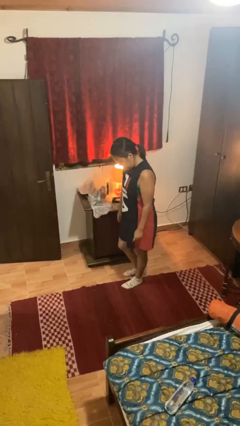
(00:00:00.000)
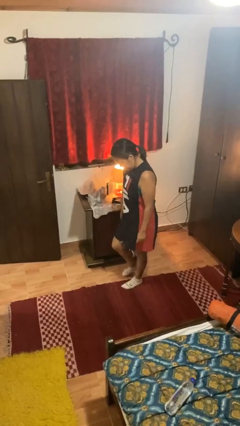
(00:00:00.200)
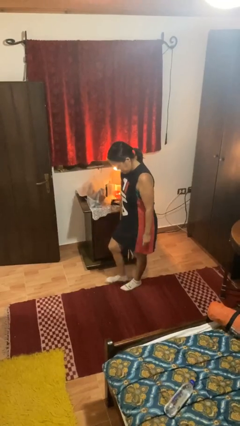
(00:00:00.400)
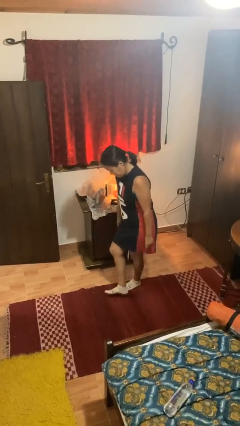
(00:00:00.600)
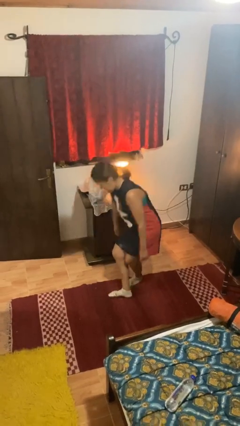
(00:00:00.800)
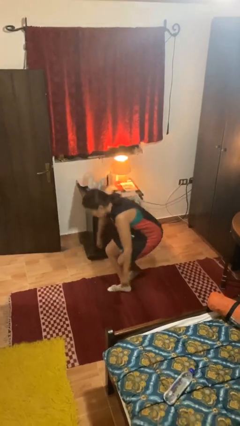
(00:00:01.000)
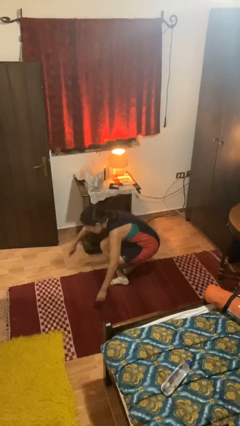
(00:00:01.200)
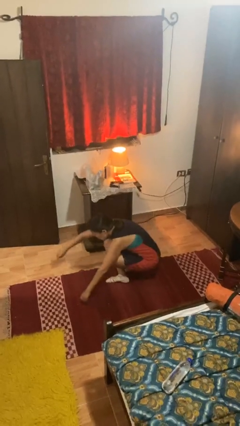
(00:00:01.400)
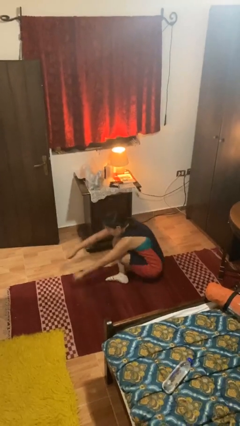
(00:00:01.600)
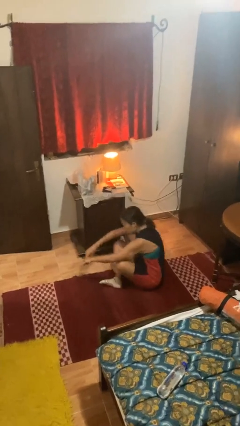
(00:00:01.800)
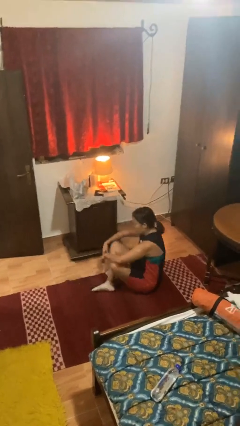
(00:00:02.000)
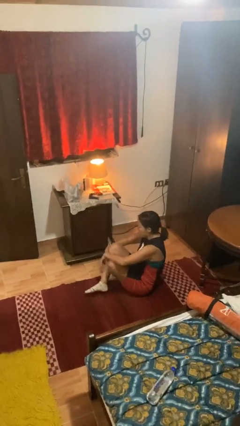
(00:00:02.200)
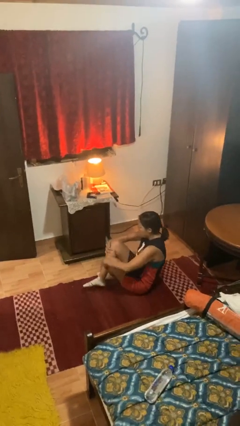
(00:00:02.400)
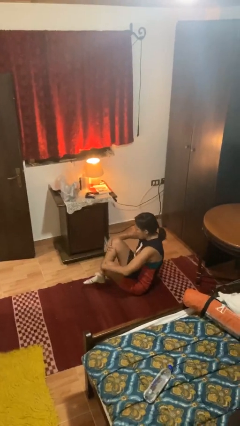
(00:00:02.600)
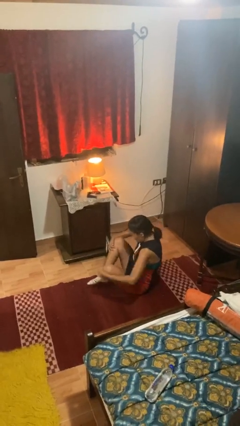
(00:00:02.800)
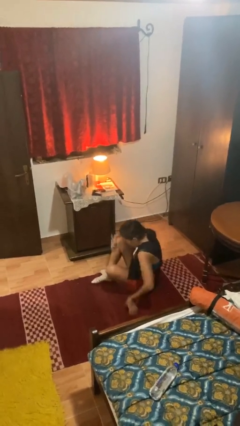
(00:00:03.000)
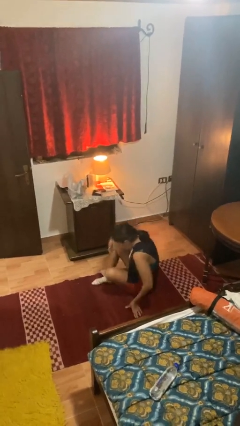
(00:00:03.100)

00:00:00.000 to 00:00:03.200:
person sits crisscross

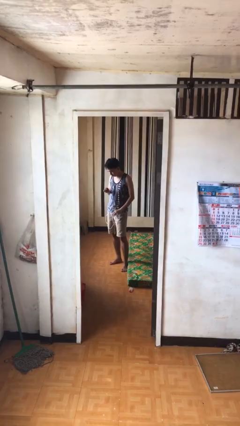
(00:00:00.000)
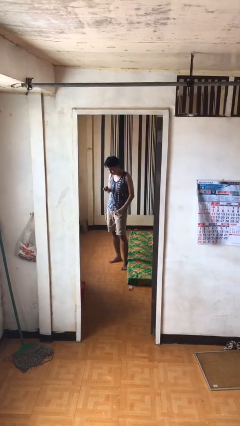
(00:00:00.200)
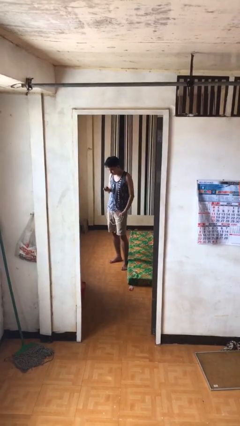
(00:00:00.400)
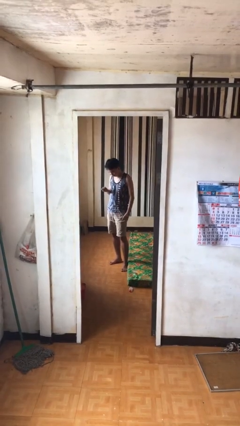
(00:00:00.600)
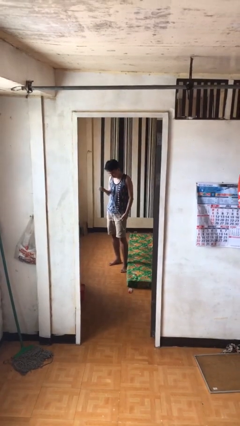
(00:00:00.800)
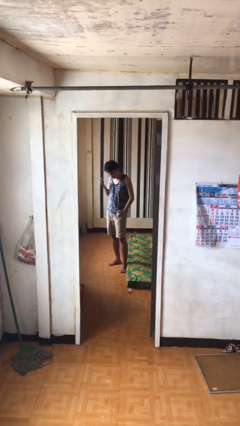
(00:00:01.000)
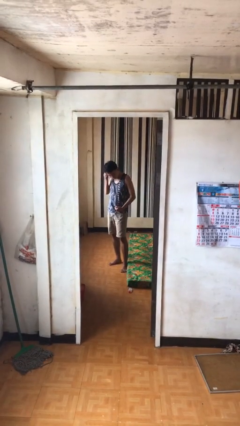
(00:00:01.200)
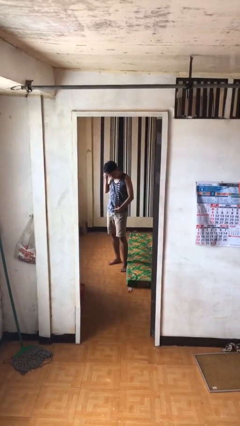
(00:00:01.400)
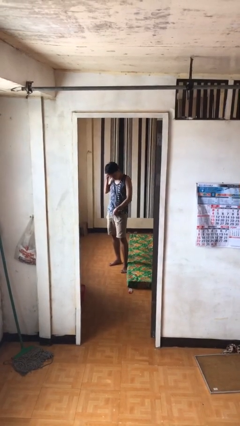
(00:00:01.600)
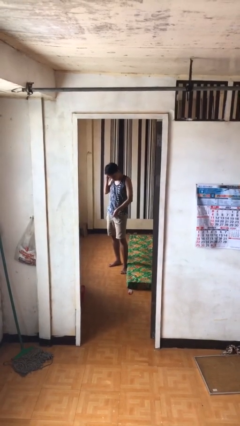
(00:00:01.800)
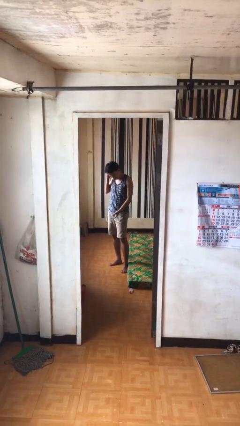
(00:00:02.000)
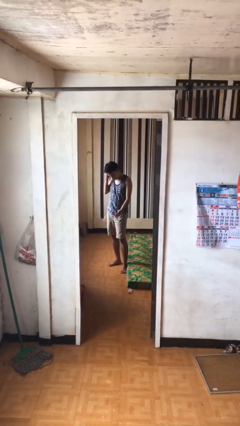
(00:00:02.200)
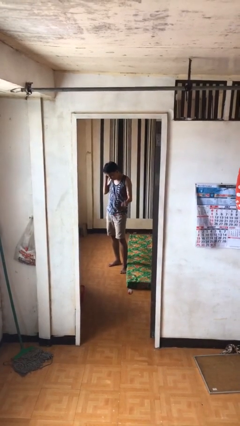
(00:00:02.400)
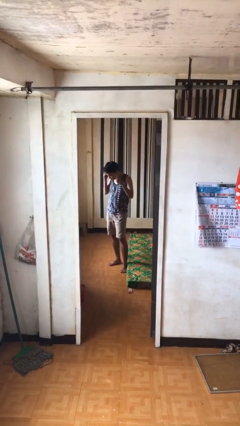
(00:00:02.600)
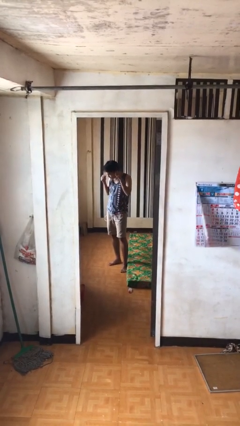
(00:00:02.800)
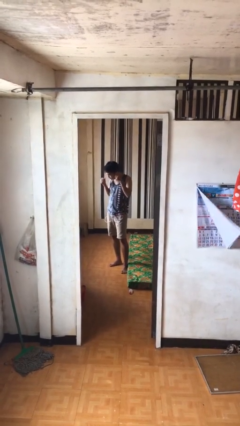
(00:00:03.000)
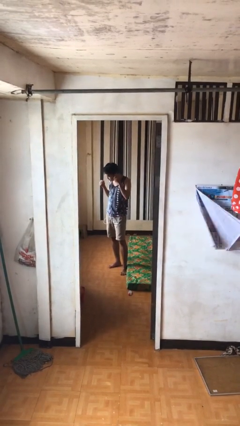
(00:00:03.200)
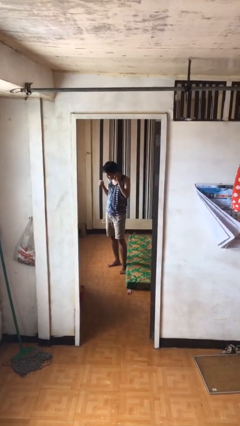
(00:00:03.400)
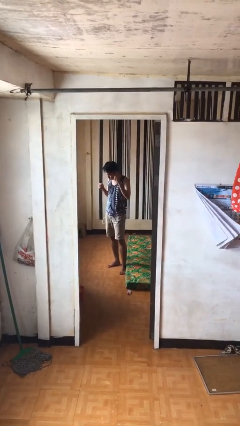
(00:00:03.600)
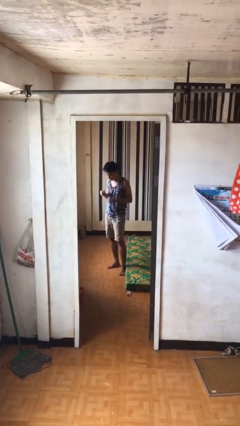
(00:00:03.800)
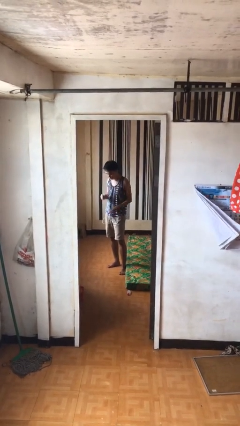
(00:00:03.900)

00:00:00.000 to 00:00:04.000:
person puts on headphones

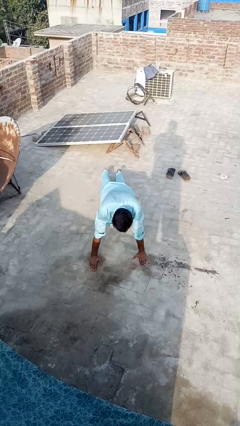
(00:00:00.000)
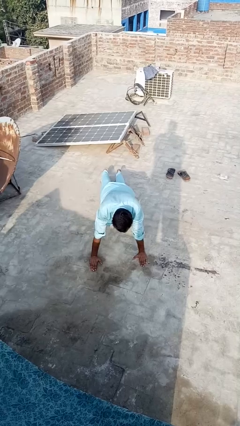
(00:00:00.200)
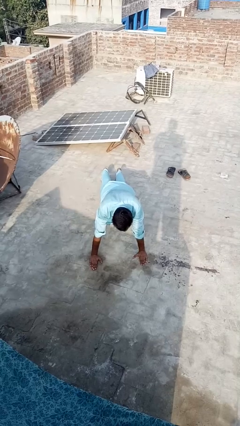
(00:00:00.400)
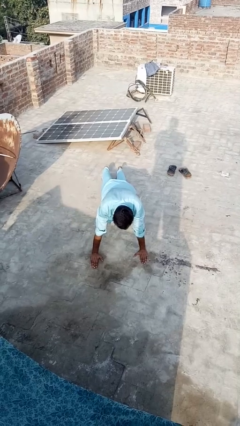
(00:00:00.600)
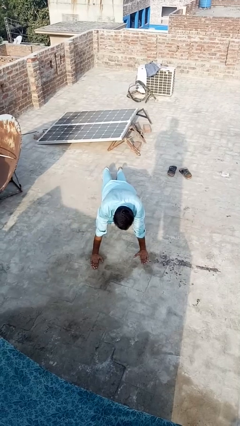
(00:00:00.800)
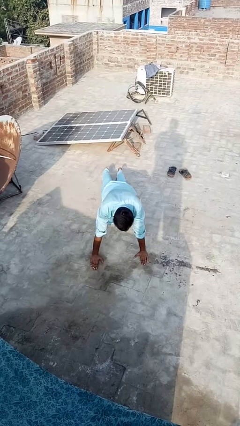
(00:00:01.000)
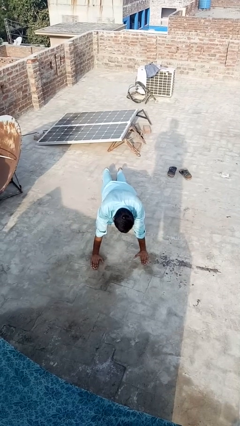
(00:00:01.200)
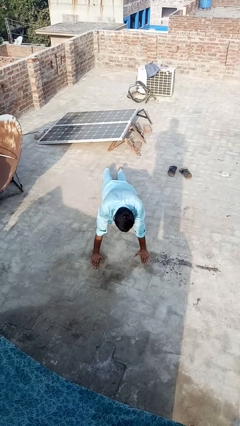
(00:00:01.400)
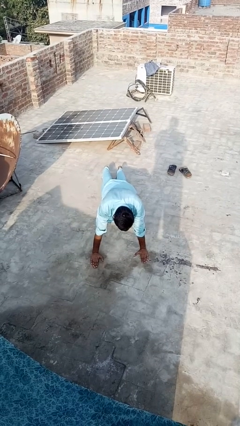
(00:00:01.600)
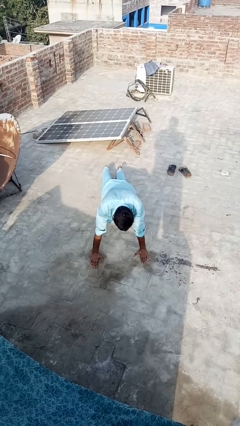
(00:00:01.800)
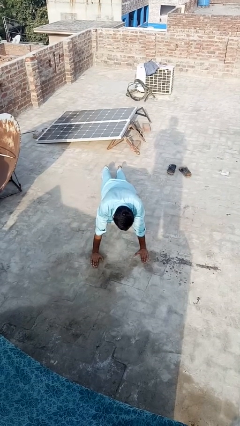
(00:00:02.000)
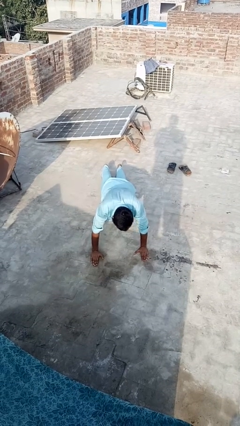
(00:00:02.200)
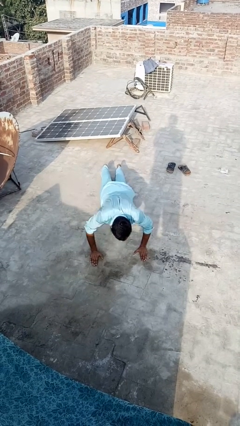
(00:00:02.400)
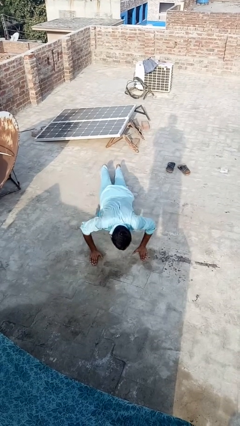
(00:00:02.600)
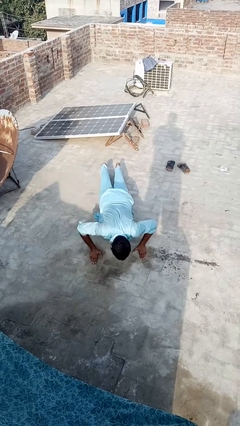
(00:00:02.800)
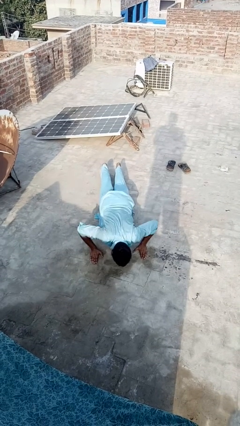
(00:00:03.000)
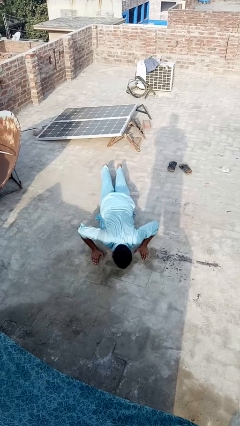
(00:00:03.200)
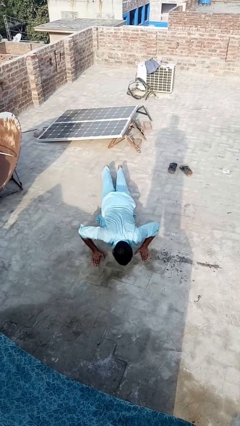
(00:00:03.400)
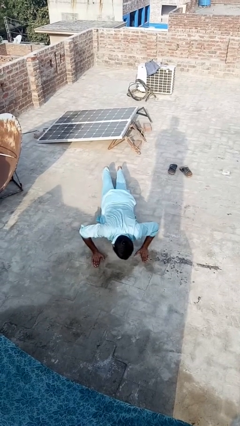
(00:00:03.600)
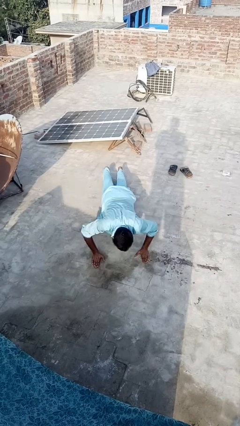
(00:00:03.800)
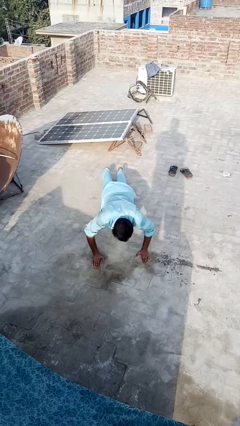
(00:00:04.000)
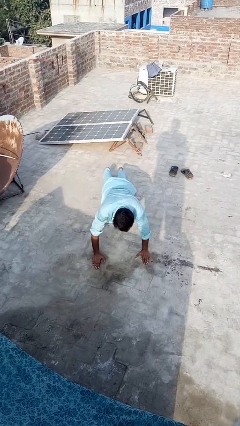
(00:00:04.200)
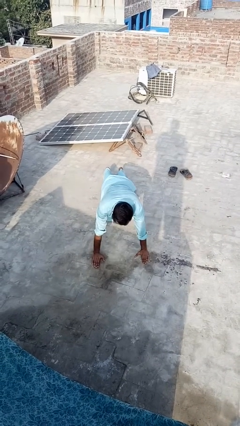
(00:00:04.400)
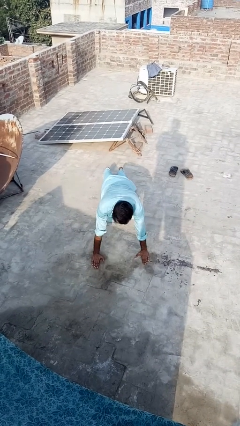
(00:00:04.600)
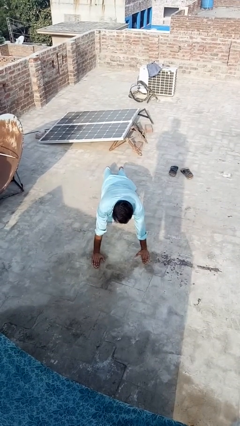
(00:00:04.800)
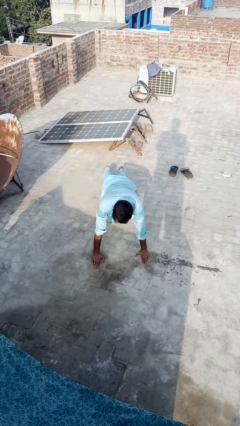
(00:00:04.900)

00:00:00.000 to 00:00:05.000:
person exercises with pushup

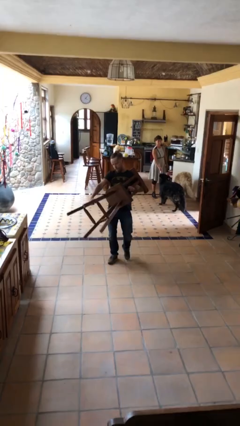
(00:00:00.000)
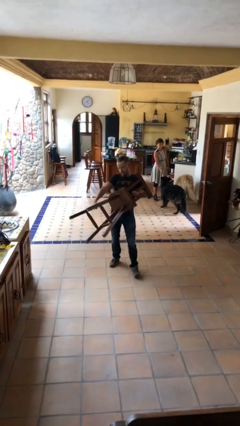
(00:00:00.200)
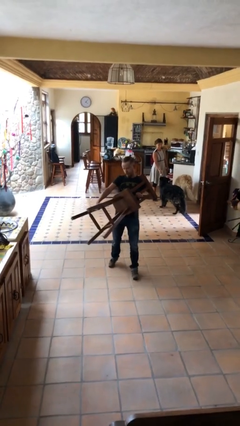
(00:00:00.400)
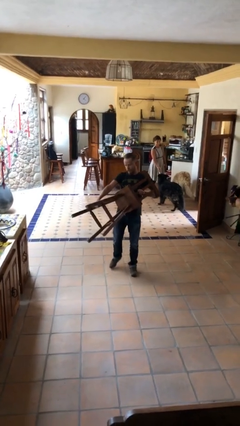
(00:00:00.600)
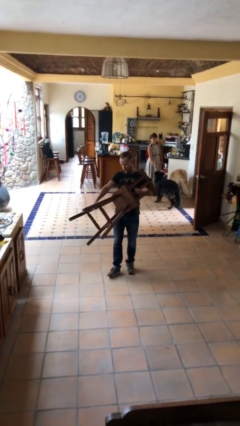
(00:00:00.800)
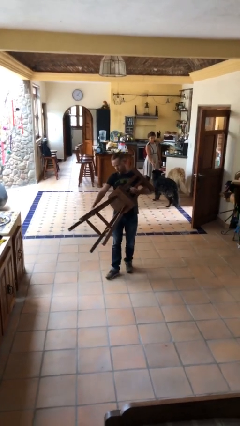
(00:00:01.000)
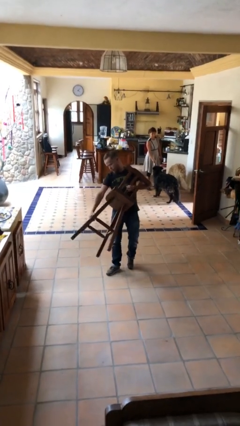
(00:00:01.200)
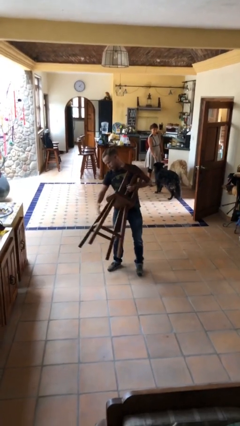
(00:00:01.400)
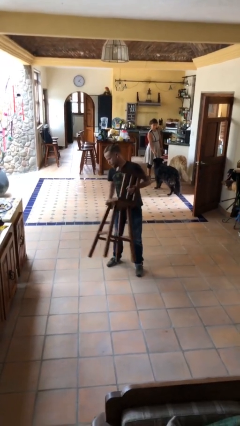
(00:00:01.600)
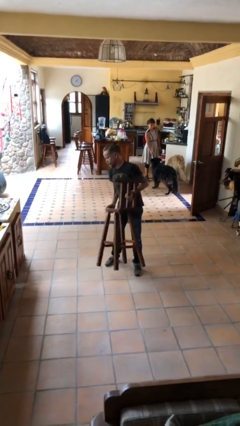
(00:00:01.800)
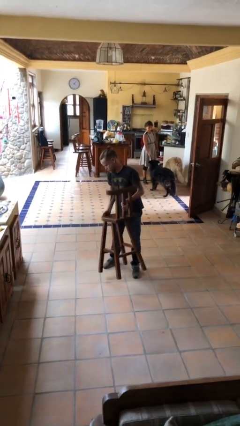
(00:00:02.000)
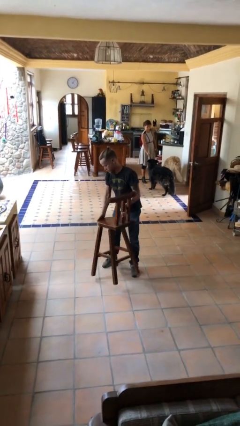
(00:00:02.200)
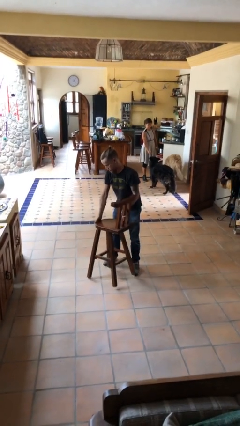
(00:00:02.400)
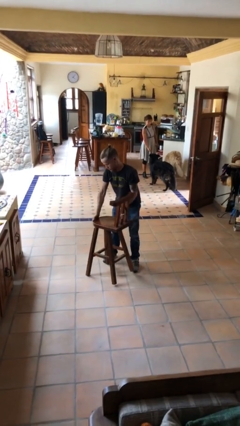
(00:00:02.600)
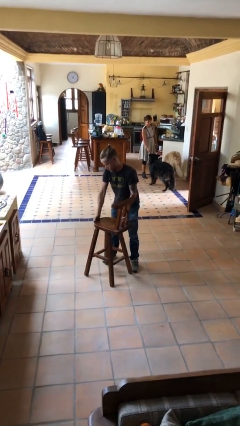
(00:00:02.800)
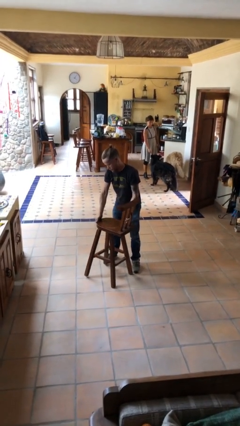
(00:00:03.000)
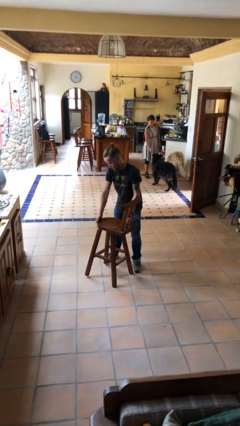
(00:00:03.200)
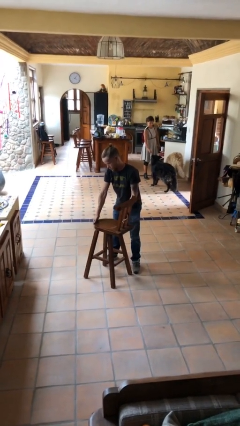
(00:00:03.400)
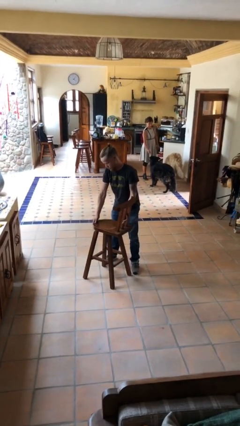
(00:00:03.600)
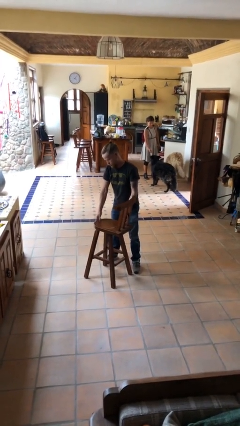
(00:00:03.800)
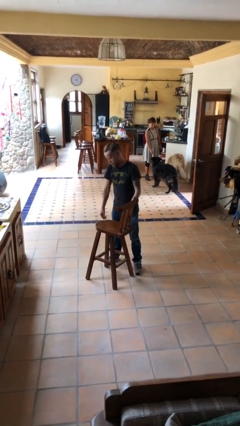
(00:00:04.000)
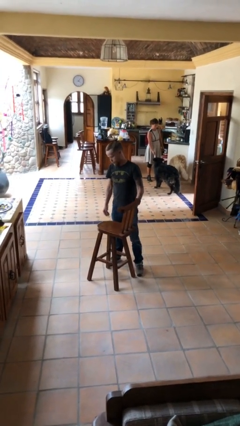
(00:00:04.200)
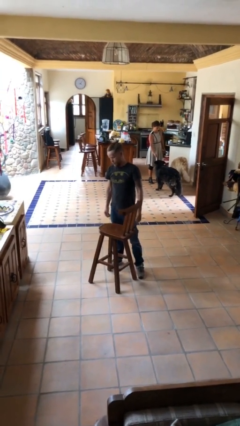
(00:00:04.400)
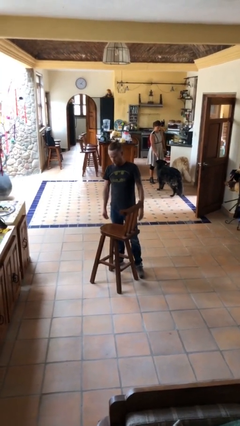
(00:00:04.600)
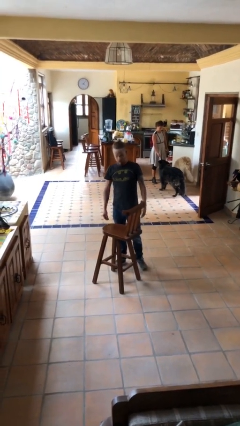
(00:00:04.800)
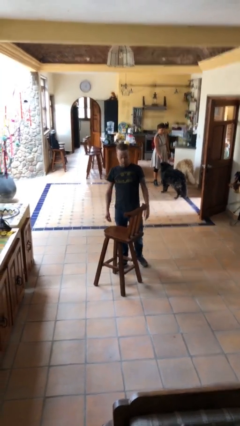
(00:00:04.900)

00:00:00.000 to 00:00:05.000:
person puts down object on floor

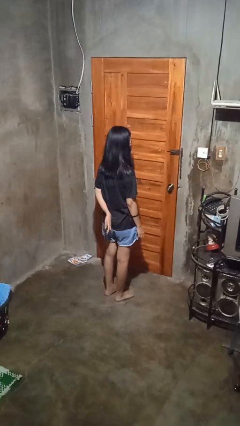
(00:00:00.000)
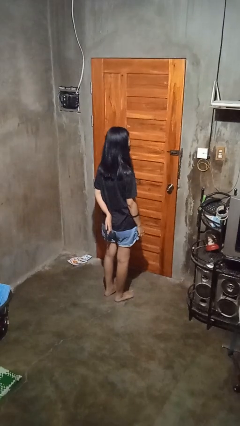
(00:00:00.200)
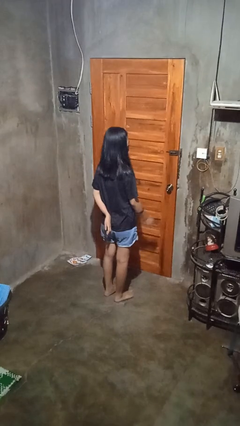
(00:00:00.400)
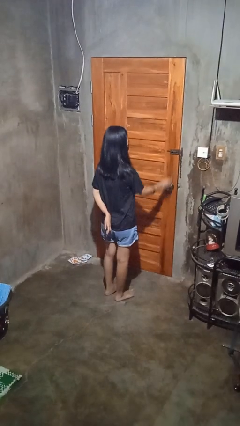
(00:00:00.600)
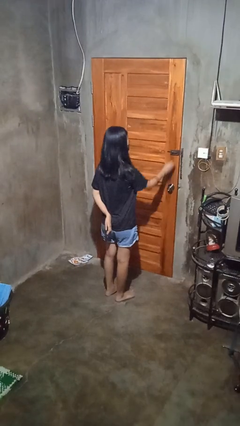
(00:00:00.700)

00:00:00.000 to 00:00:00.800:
person locks door with keys
